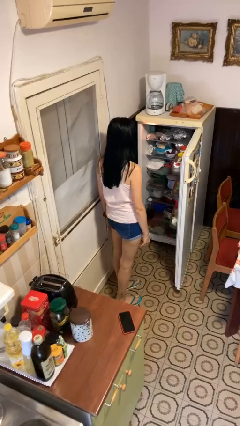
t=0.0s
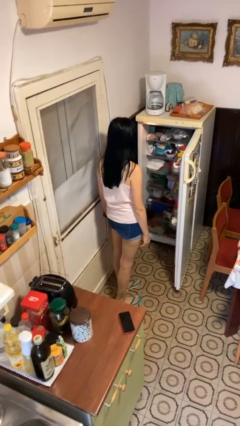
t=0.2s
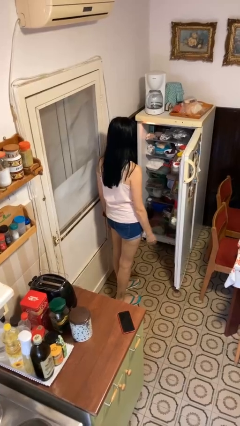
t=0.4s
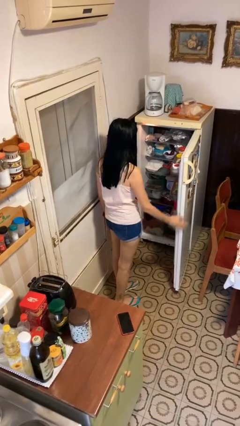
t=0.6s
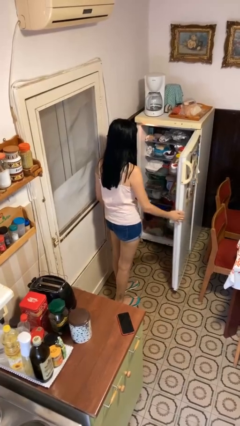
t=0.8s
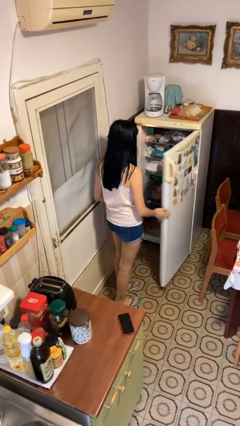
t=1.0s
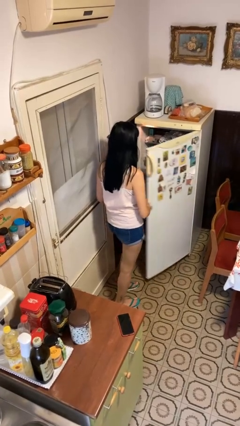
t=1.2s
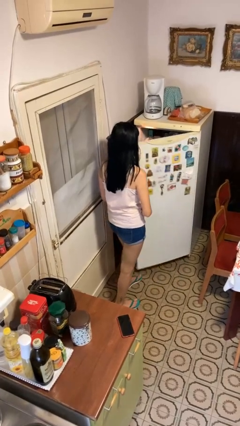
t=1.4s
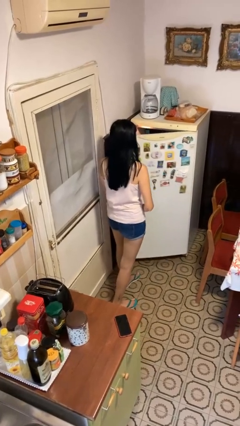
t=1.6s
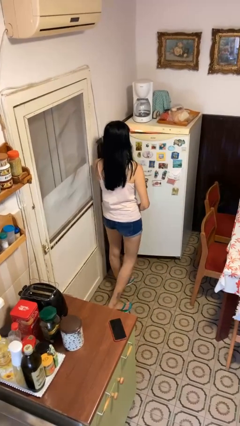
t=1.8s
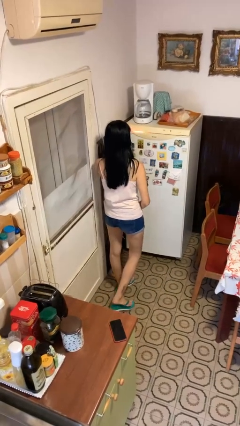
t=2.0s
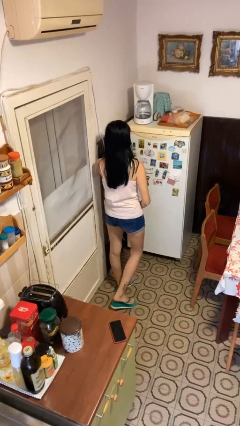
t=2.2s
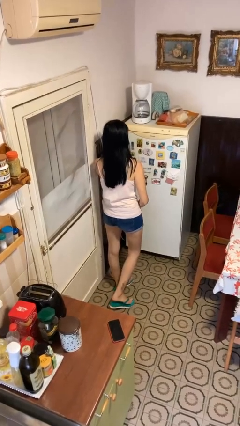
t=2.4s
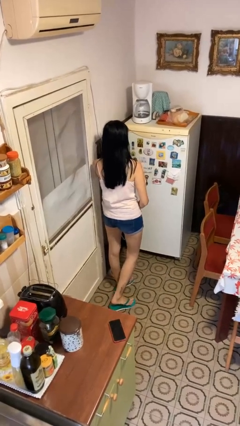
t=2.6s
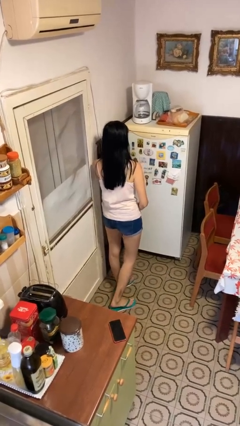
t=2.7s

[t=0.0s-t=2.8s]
person closes refrigerator

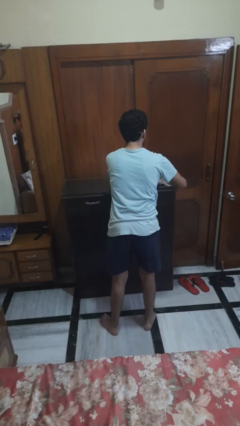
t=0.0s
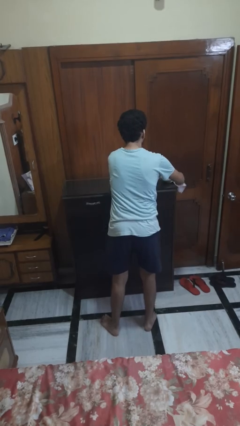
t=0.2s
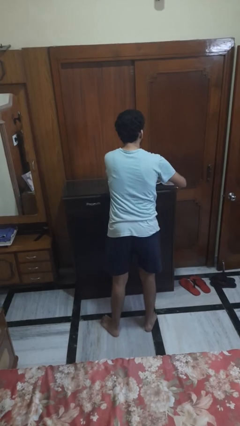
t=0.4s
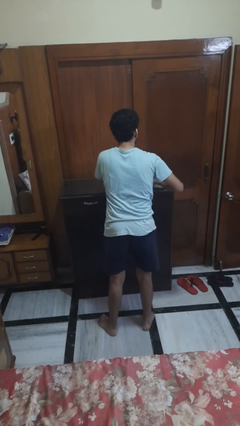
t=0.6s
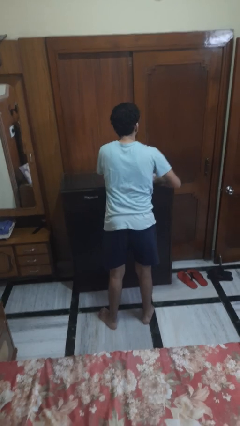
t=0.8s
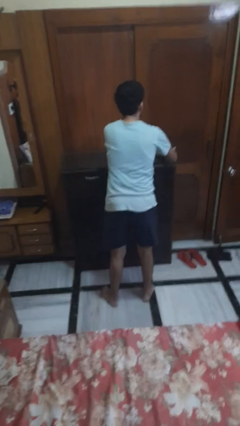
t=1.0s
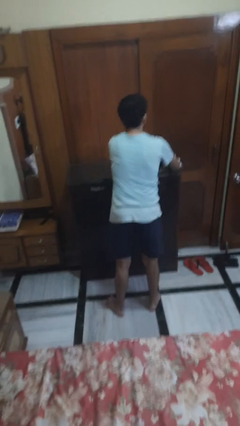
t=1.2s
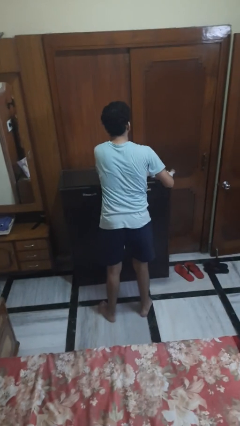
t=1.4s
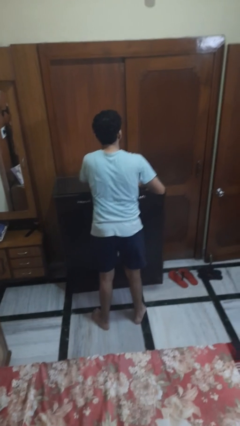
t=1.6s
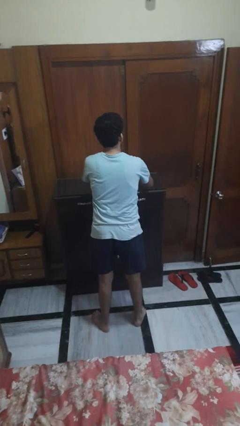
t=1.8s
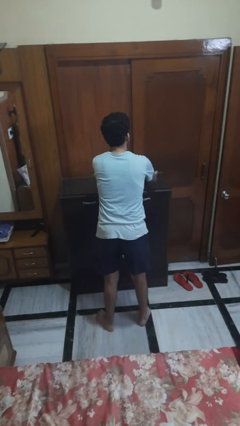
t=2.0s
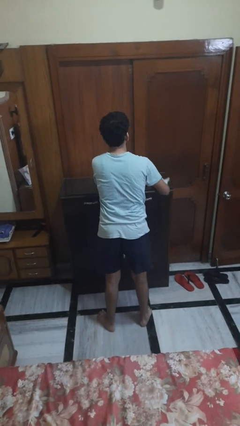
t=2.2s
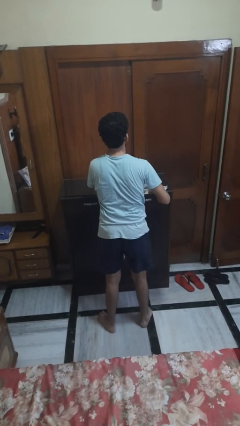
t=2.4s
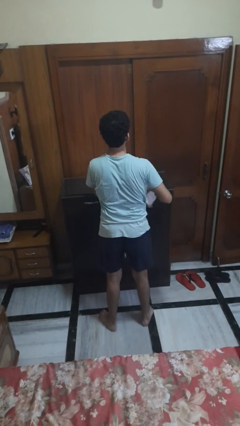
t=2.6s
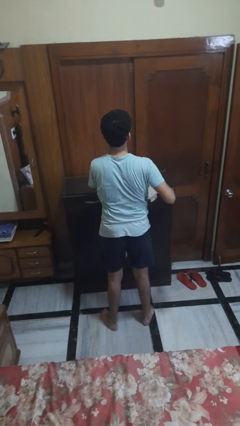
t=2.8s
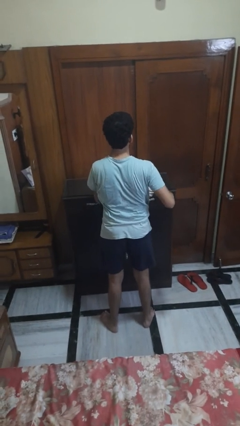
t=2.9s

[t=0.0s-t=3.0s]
person cleans table with rag

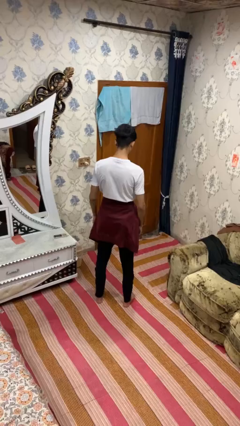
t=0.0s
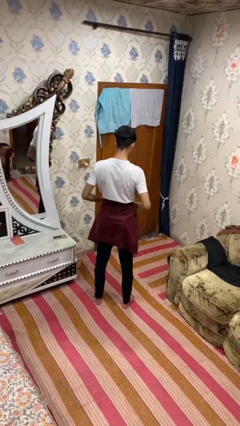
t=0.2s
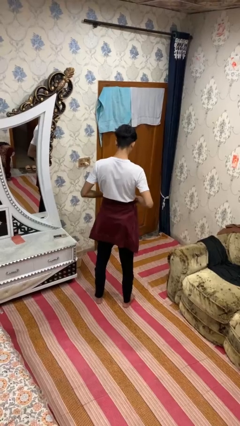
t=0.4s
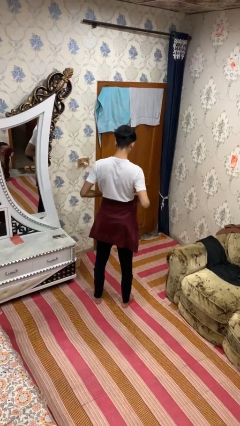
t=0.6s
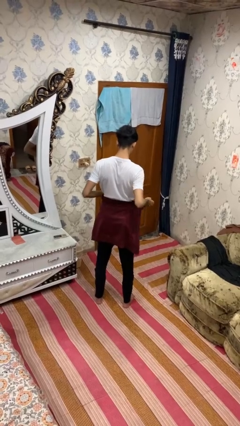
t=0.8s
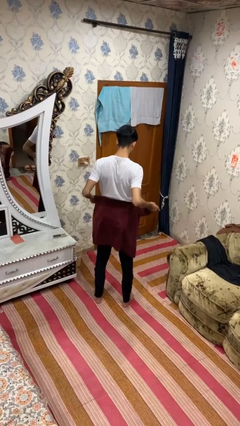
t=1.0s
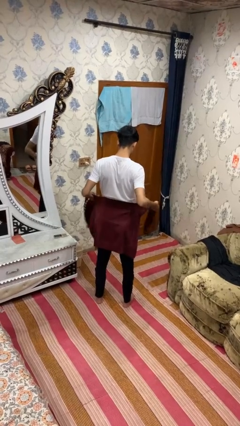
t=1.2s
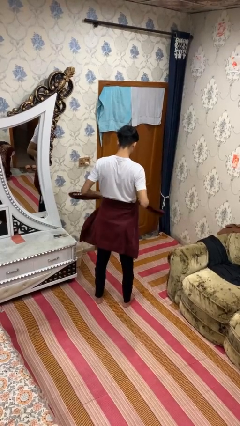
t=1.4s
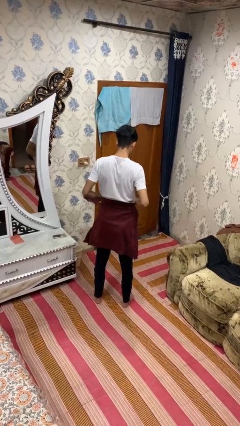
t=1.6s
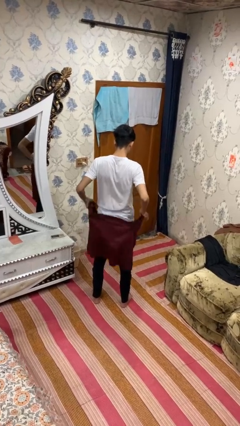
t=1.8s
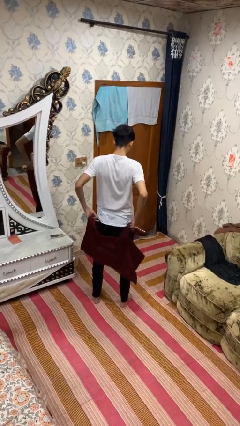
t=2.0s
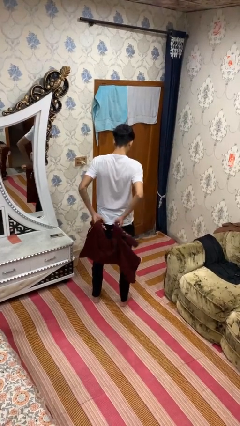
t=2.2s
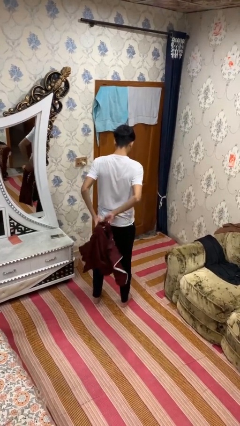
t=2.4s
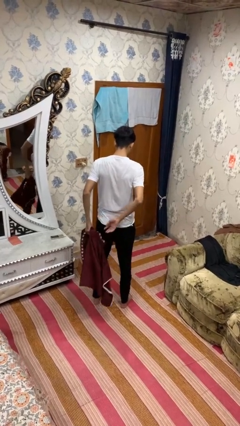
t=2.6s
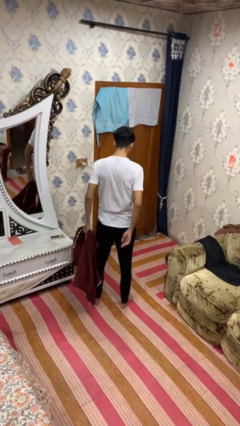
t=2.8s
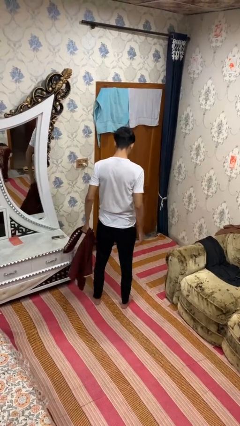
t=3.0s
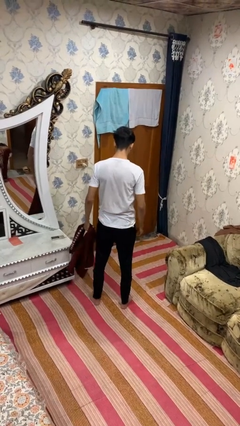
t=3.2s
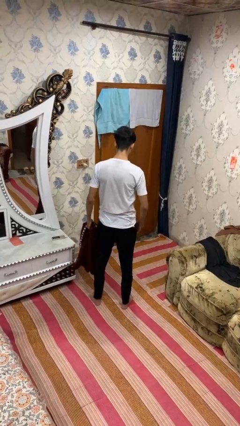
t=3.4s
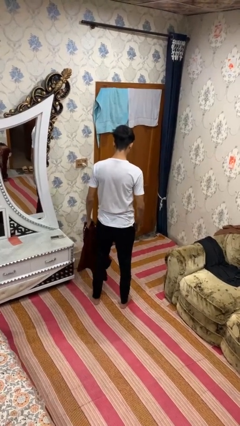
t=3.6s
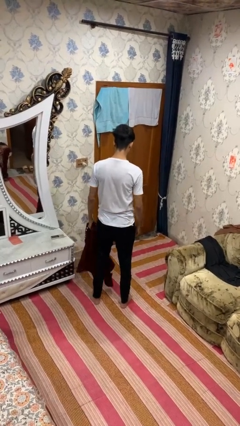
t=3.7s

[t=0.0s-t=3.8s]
person unties jacket around waist

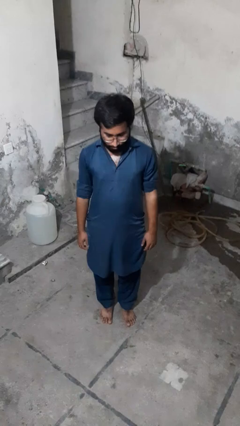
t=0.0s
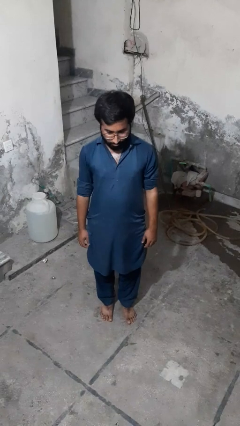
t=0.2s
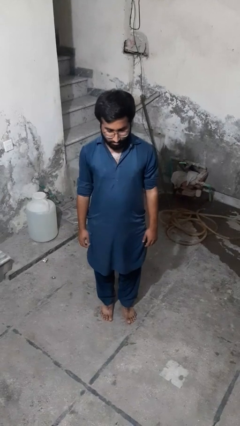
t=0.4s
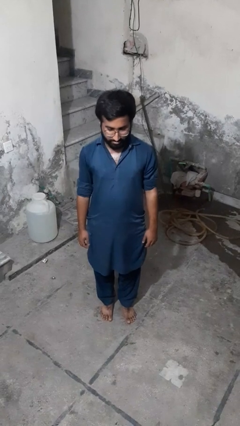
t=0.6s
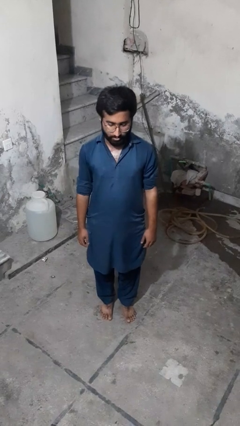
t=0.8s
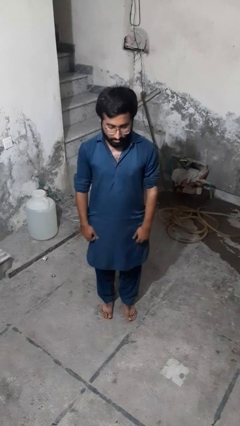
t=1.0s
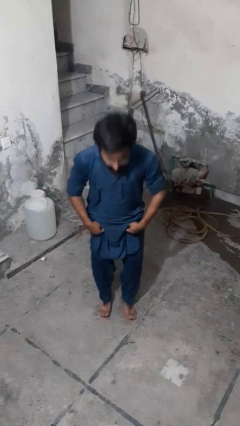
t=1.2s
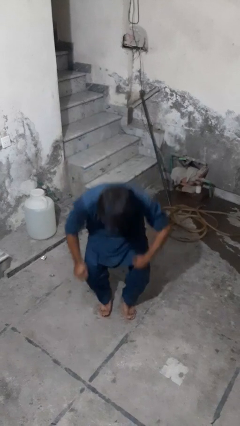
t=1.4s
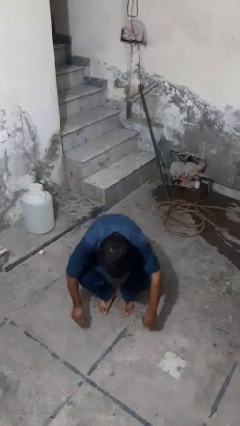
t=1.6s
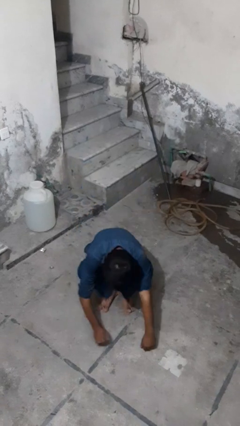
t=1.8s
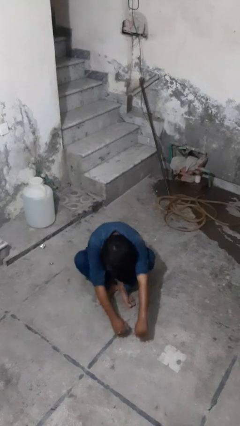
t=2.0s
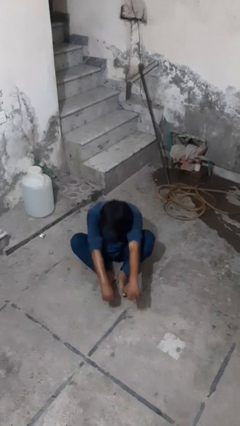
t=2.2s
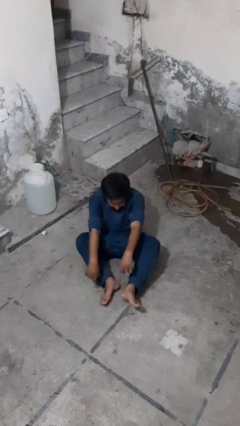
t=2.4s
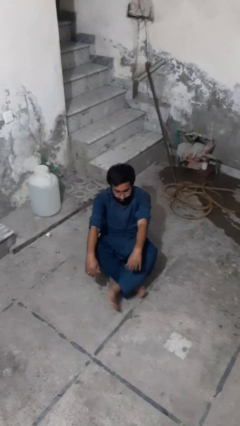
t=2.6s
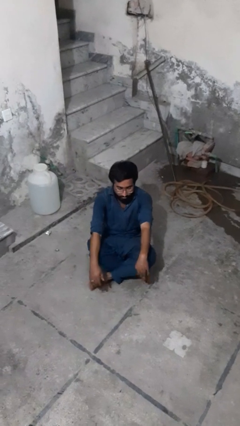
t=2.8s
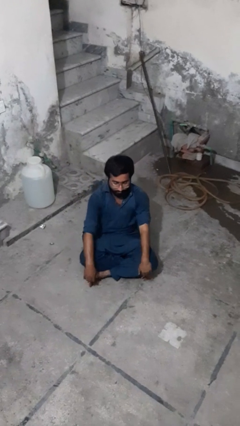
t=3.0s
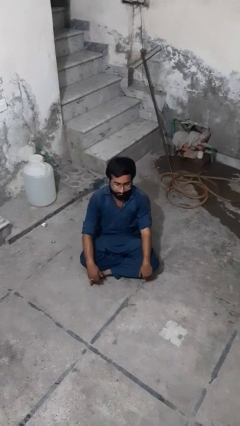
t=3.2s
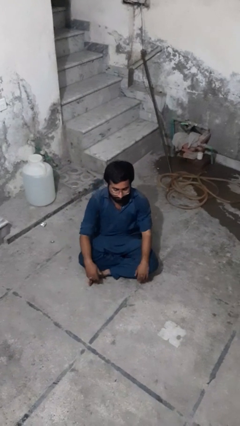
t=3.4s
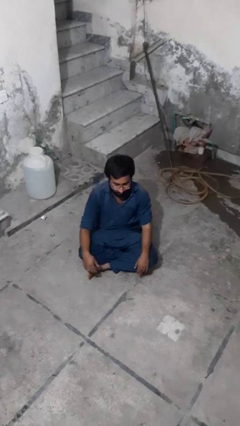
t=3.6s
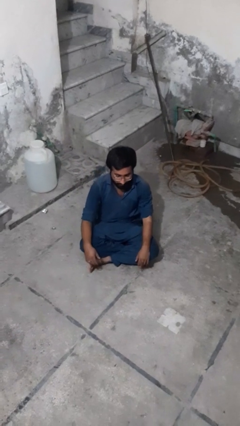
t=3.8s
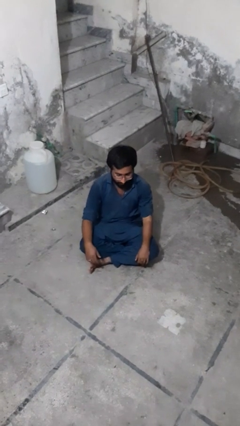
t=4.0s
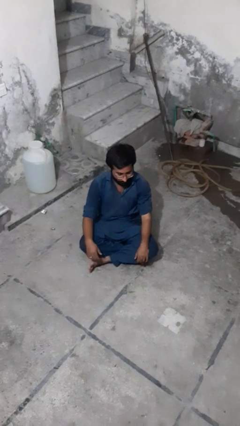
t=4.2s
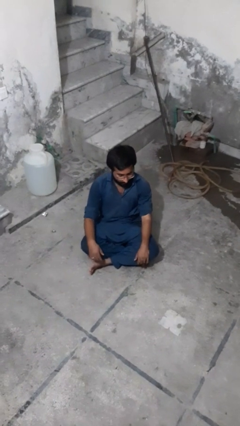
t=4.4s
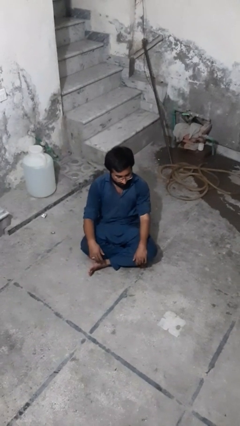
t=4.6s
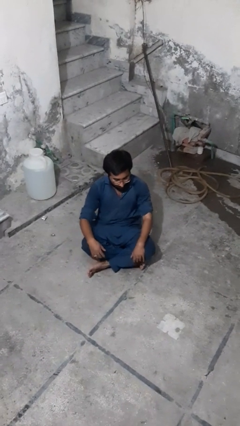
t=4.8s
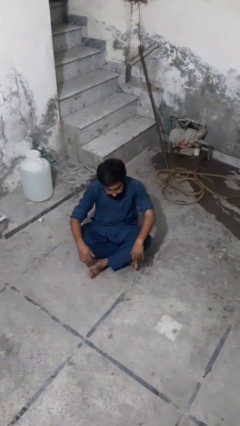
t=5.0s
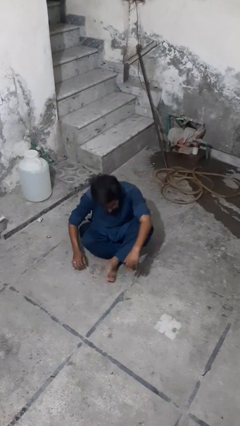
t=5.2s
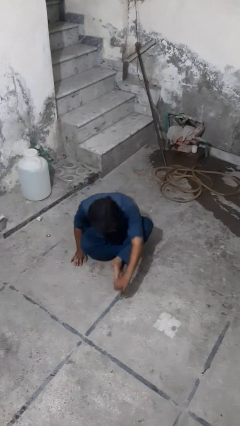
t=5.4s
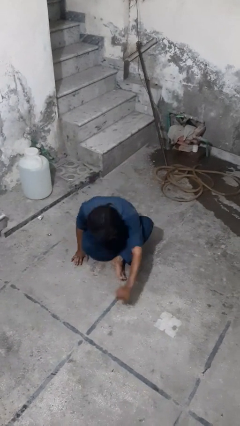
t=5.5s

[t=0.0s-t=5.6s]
person sits crisscross

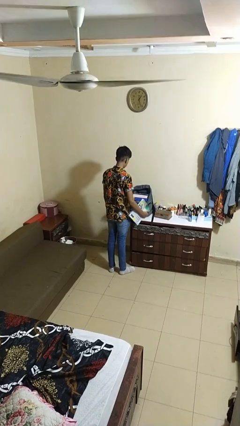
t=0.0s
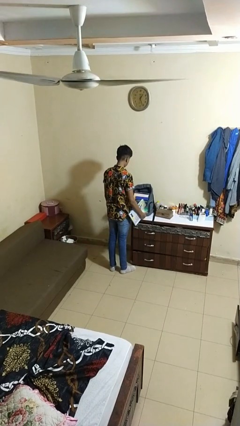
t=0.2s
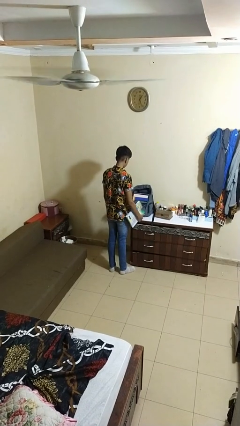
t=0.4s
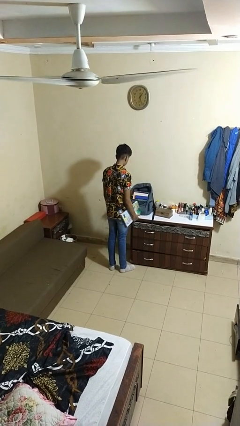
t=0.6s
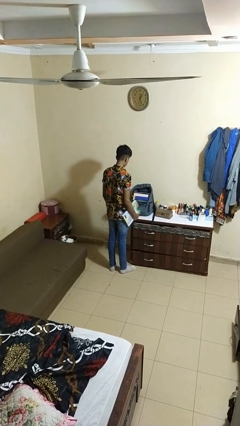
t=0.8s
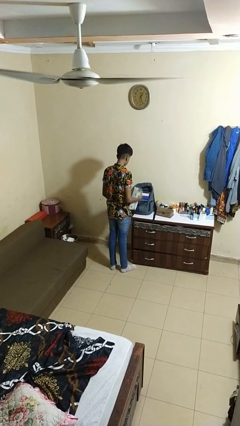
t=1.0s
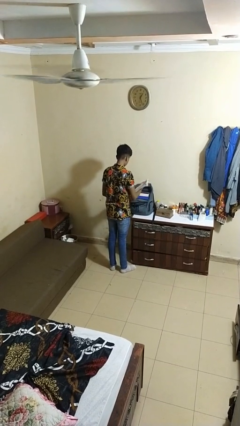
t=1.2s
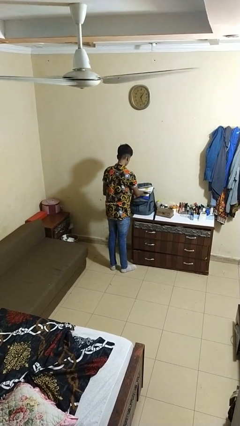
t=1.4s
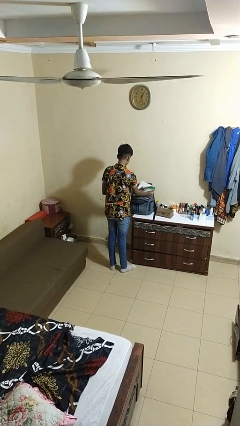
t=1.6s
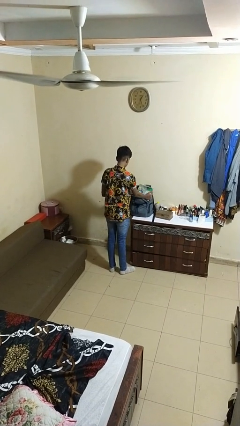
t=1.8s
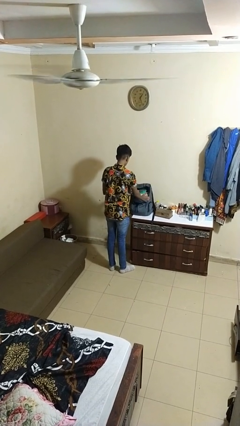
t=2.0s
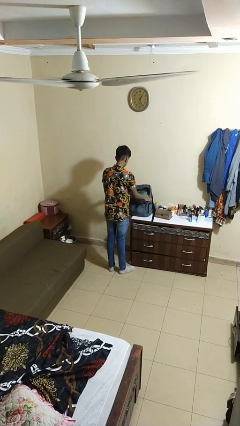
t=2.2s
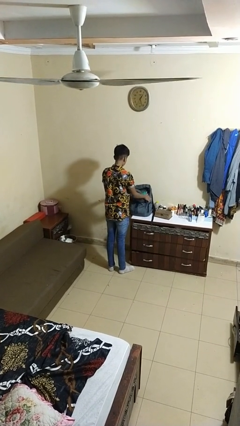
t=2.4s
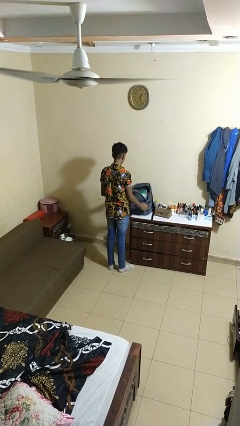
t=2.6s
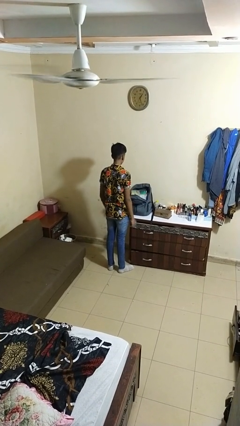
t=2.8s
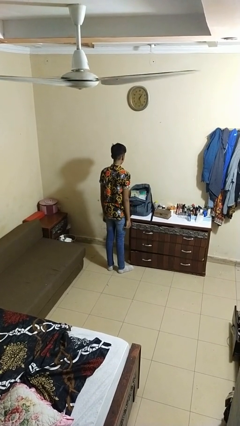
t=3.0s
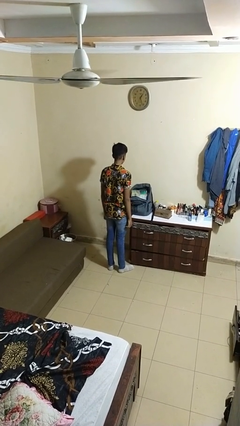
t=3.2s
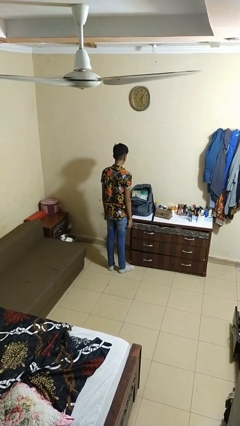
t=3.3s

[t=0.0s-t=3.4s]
person puts object into backpack
